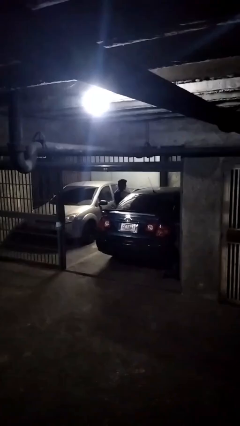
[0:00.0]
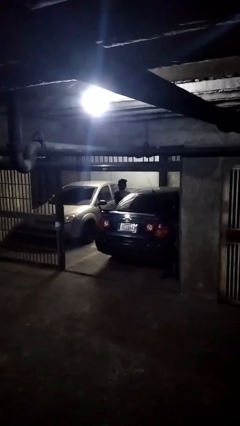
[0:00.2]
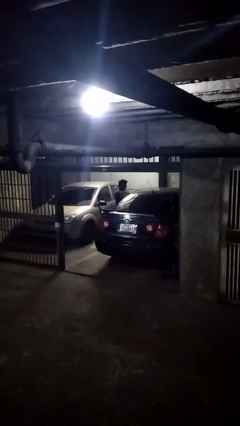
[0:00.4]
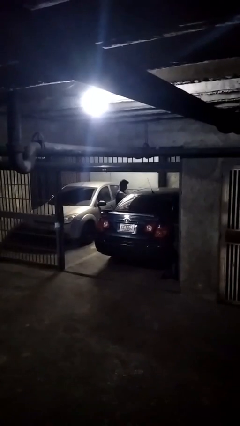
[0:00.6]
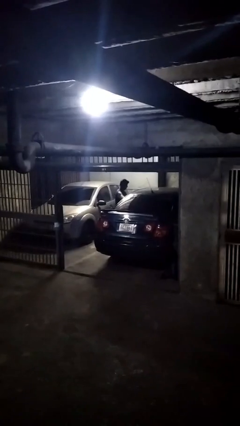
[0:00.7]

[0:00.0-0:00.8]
person closes car door

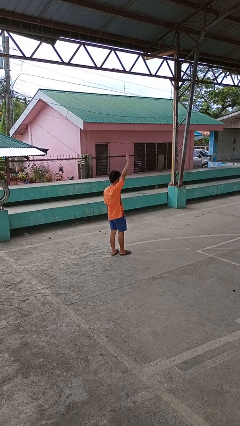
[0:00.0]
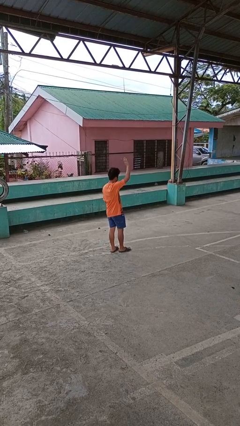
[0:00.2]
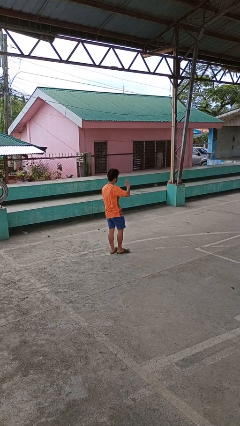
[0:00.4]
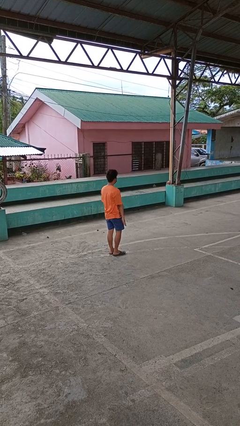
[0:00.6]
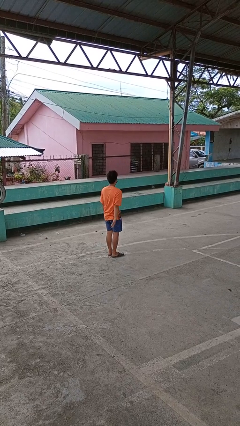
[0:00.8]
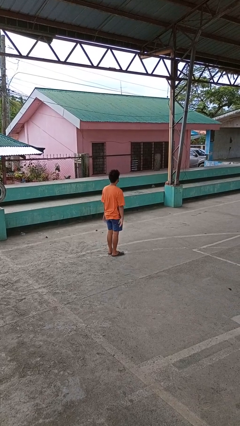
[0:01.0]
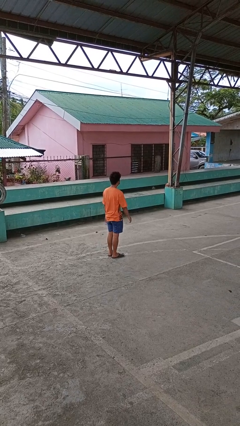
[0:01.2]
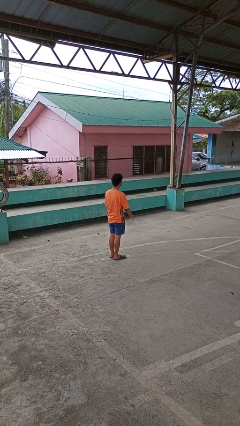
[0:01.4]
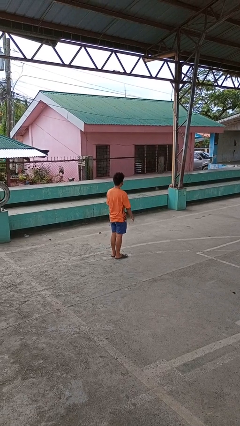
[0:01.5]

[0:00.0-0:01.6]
person gestures lower hand

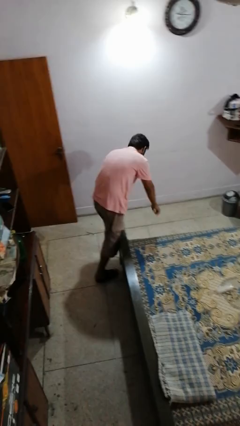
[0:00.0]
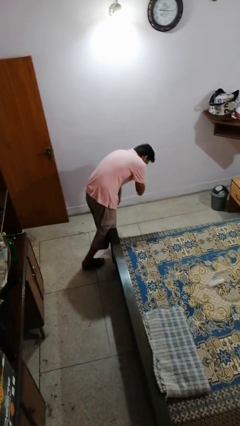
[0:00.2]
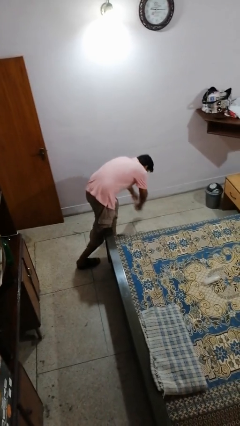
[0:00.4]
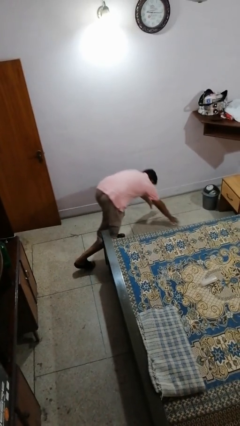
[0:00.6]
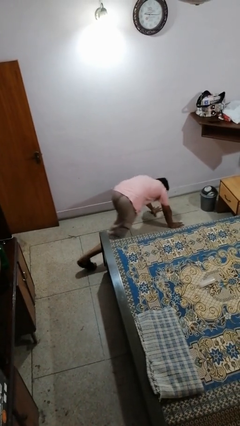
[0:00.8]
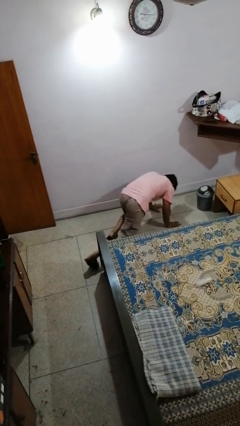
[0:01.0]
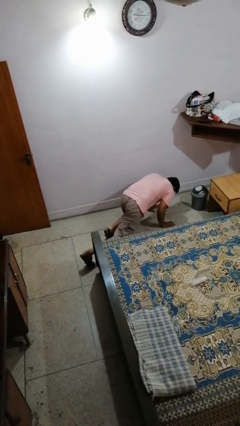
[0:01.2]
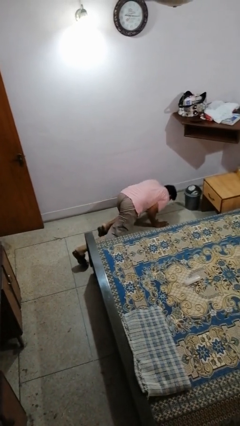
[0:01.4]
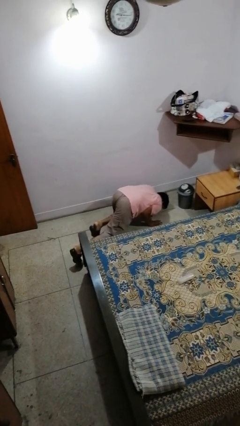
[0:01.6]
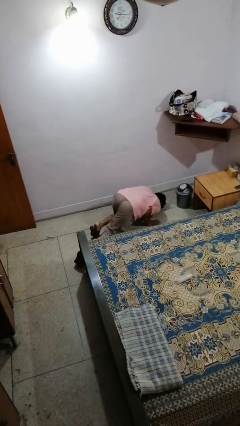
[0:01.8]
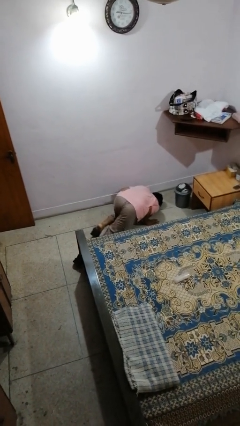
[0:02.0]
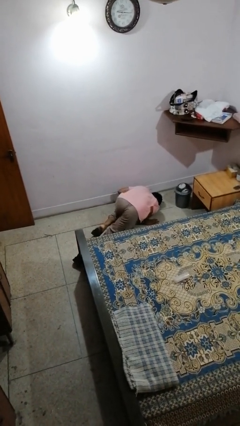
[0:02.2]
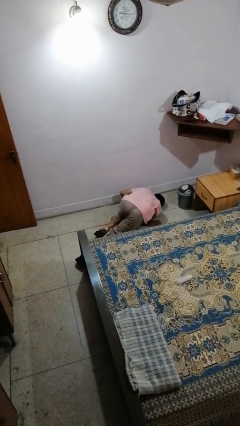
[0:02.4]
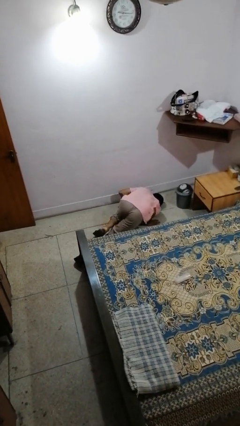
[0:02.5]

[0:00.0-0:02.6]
person lies down on floor

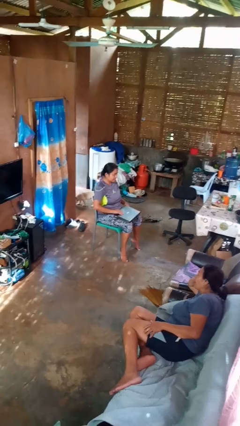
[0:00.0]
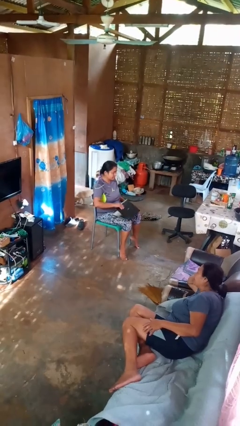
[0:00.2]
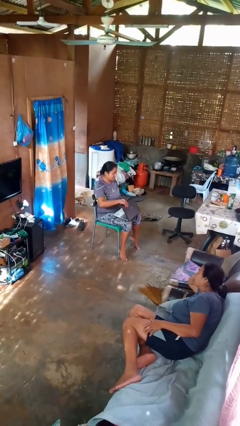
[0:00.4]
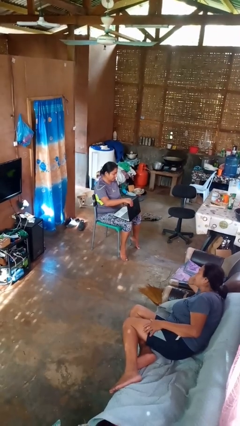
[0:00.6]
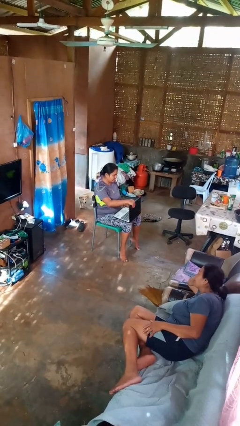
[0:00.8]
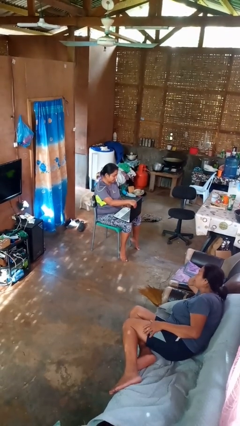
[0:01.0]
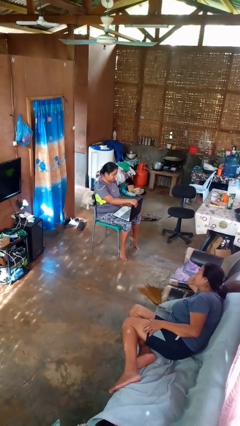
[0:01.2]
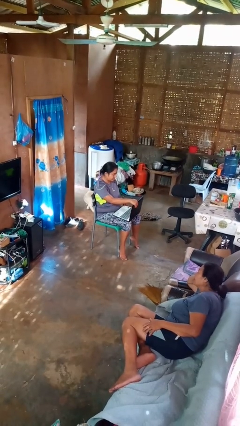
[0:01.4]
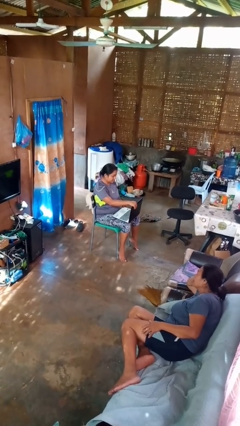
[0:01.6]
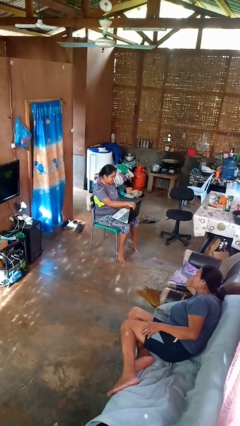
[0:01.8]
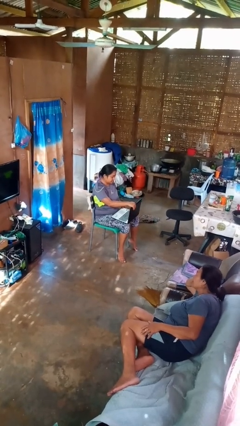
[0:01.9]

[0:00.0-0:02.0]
person opens laptop

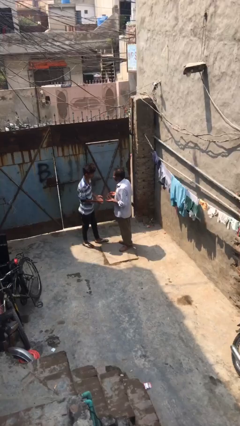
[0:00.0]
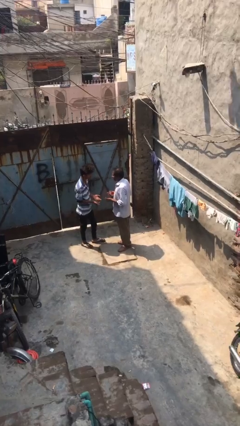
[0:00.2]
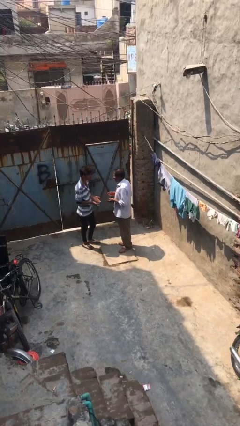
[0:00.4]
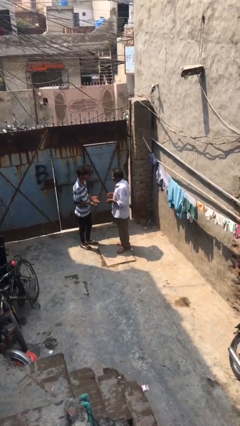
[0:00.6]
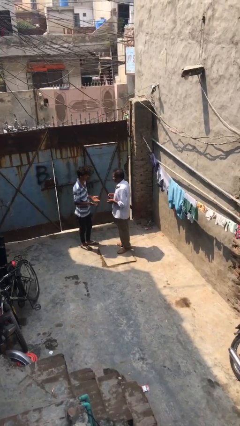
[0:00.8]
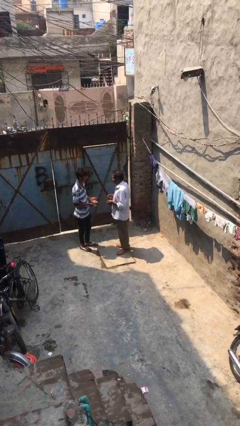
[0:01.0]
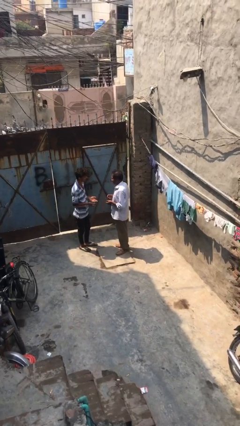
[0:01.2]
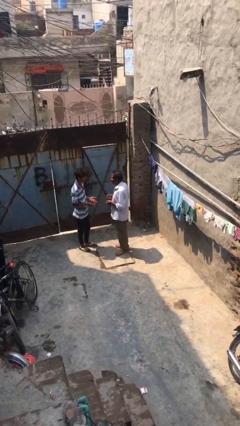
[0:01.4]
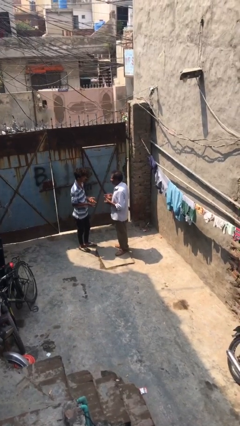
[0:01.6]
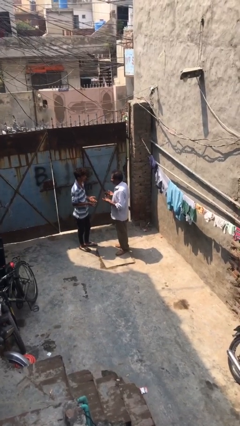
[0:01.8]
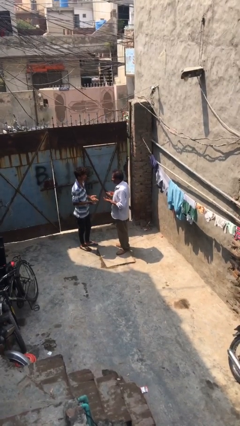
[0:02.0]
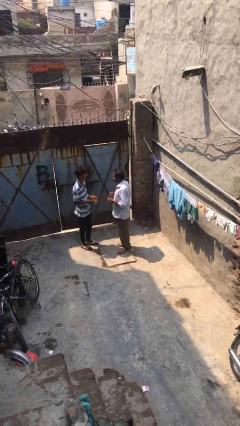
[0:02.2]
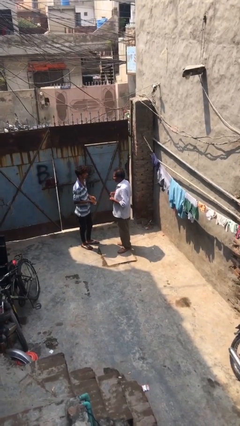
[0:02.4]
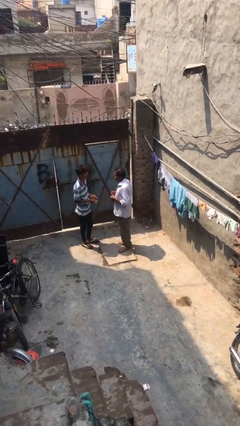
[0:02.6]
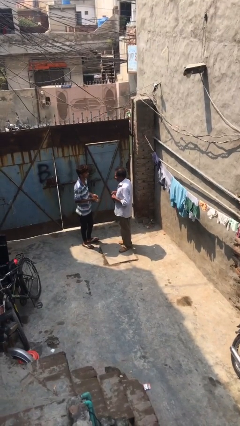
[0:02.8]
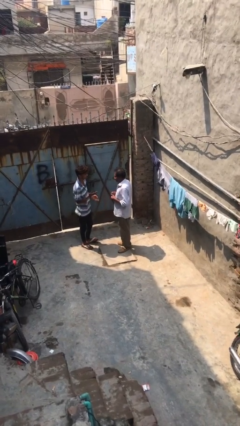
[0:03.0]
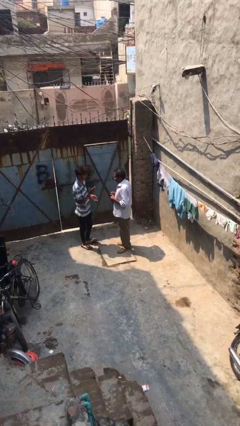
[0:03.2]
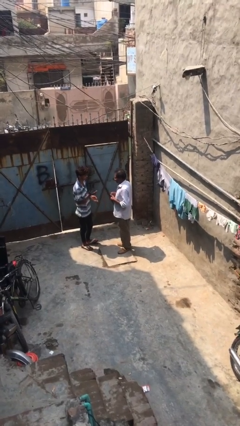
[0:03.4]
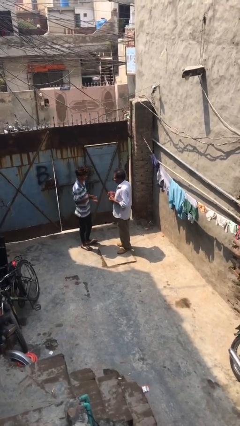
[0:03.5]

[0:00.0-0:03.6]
person talks to person

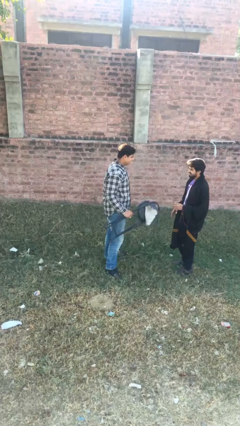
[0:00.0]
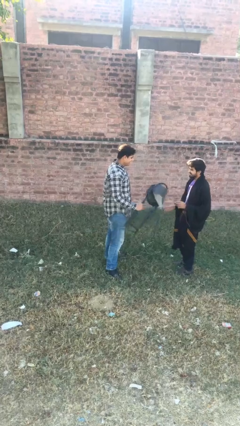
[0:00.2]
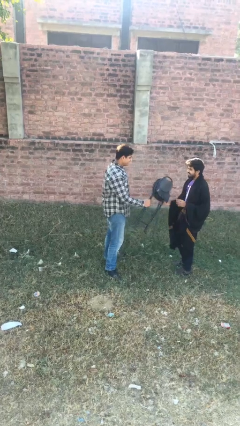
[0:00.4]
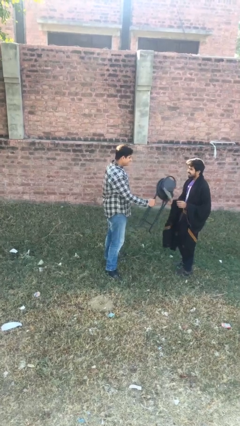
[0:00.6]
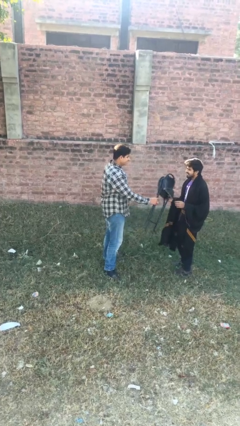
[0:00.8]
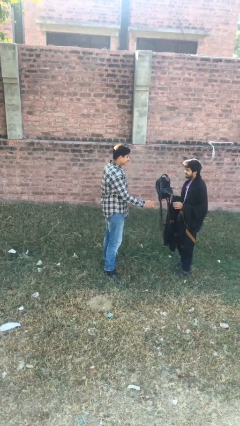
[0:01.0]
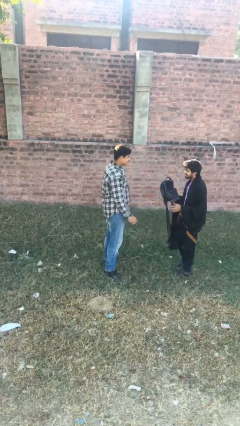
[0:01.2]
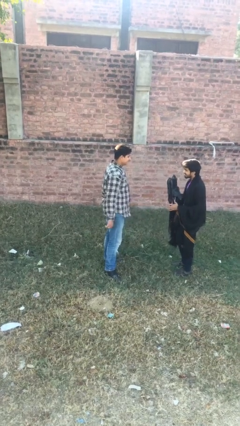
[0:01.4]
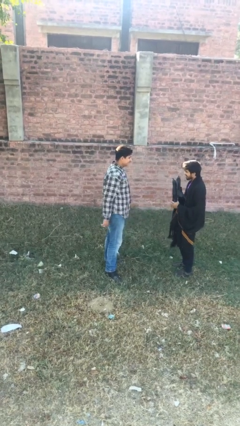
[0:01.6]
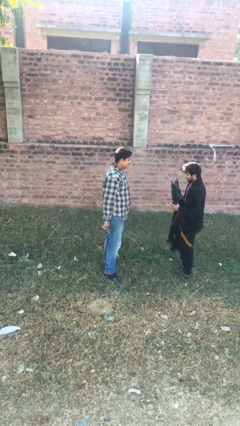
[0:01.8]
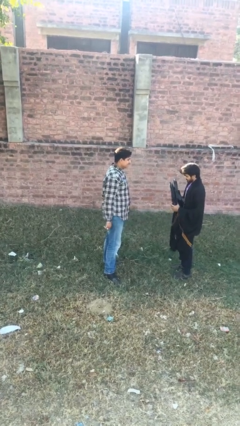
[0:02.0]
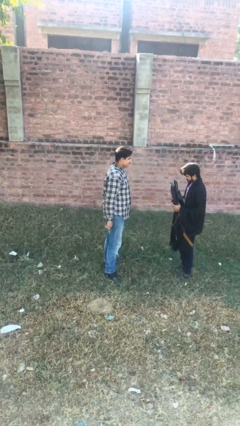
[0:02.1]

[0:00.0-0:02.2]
person transfers object to person

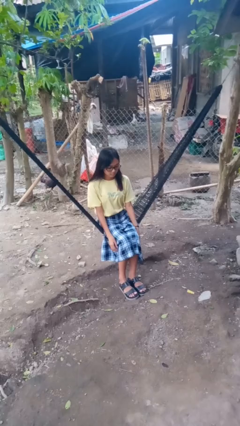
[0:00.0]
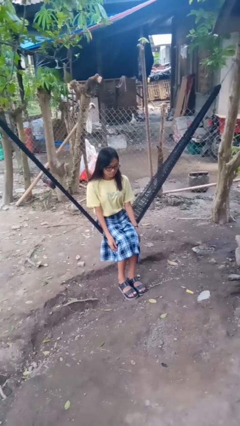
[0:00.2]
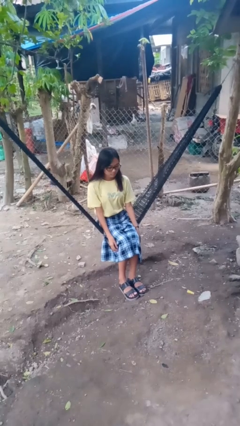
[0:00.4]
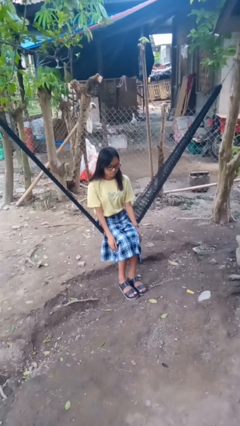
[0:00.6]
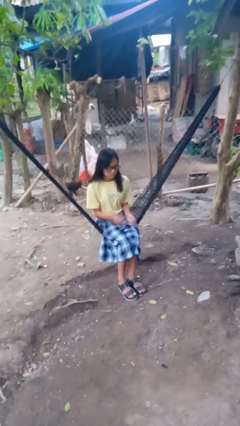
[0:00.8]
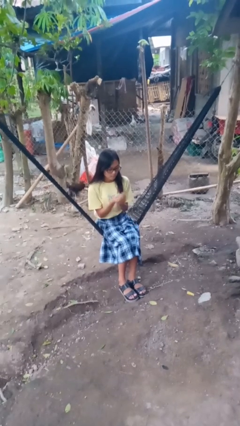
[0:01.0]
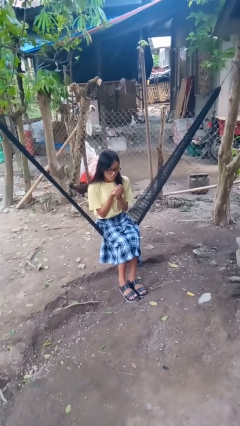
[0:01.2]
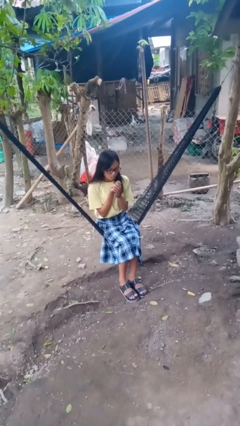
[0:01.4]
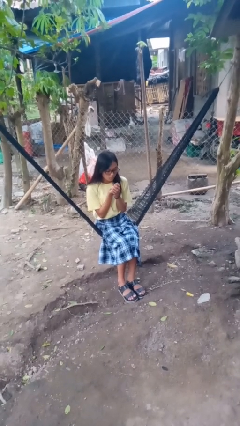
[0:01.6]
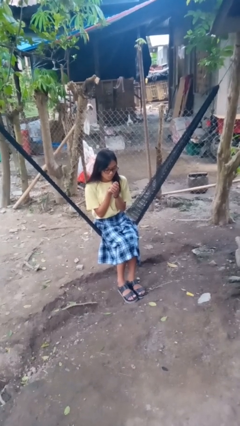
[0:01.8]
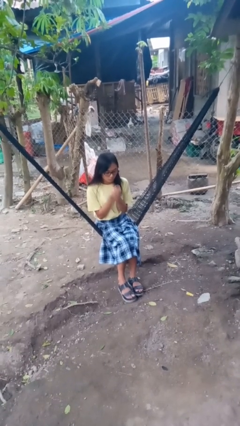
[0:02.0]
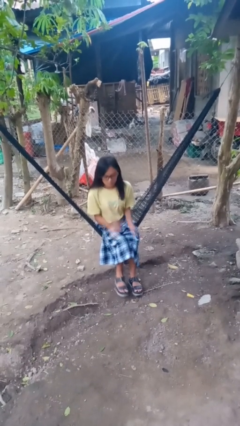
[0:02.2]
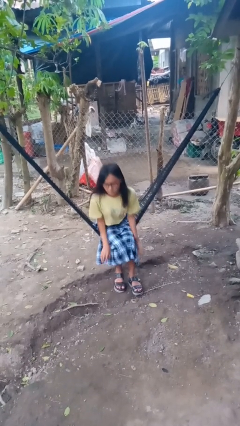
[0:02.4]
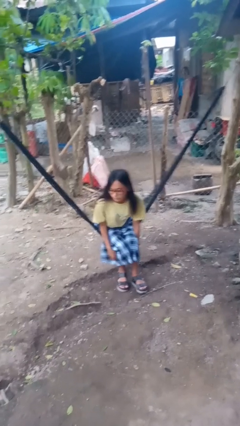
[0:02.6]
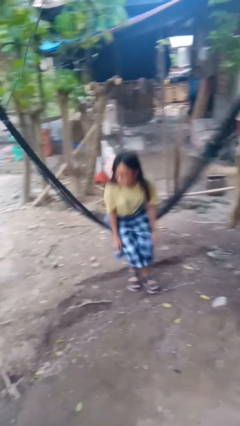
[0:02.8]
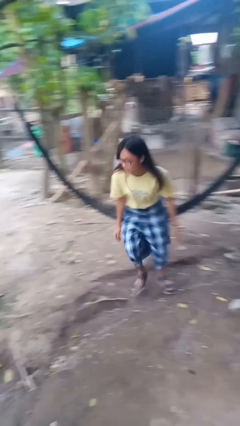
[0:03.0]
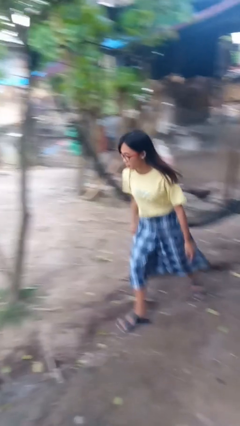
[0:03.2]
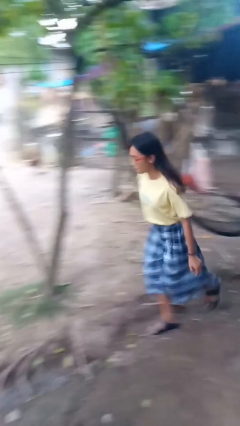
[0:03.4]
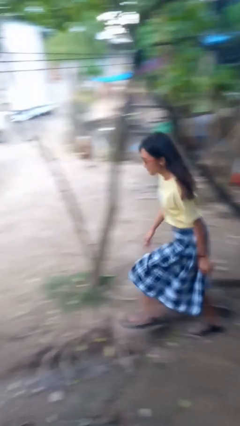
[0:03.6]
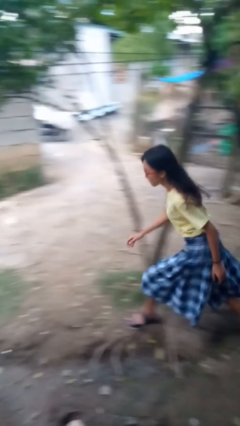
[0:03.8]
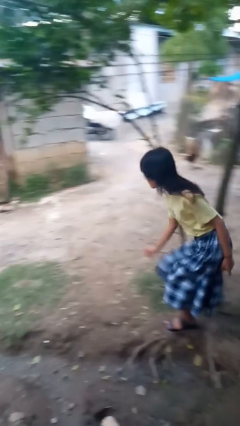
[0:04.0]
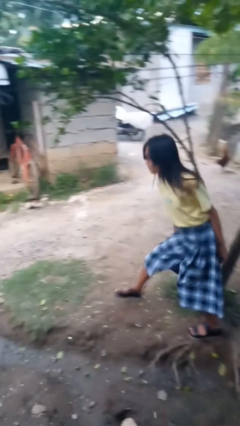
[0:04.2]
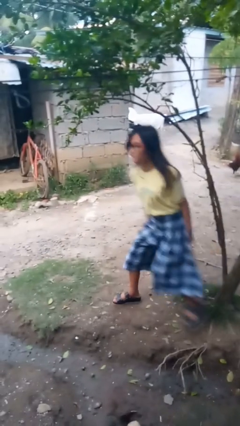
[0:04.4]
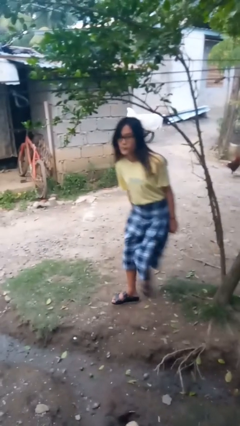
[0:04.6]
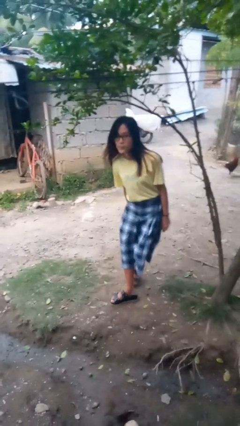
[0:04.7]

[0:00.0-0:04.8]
person blows into hands
